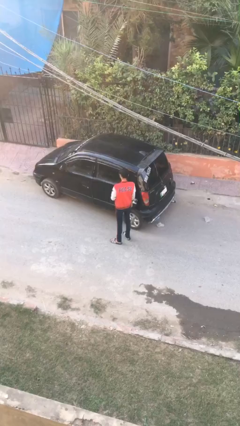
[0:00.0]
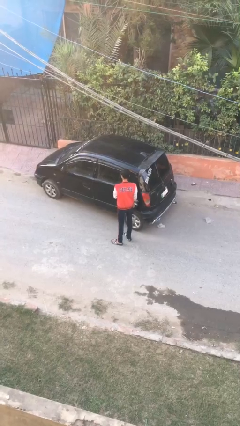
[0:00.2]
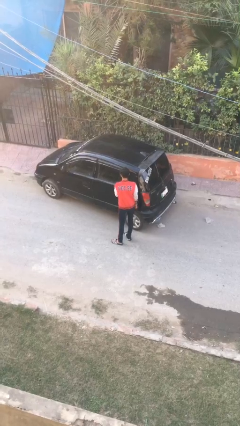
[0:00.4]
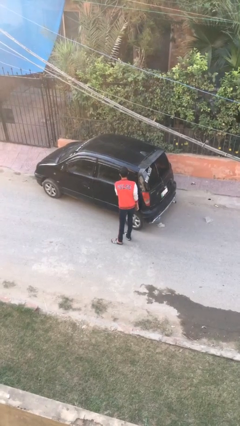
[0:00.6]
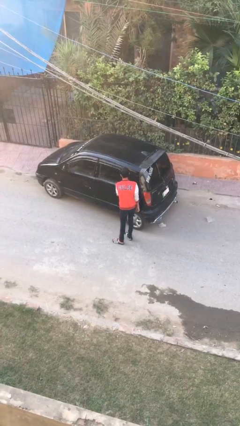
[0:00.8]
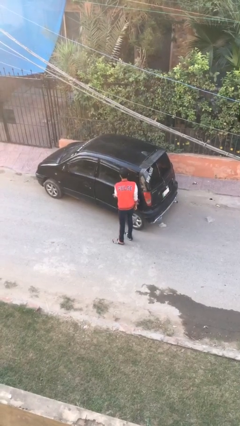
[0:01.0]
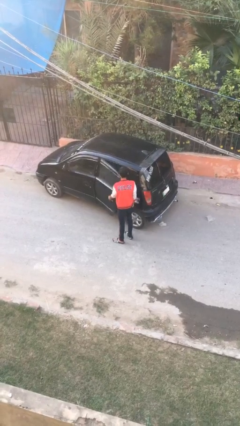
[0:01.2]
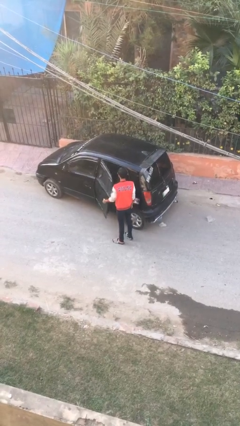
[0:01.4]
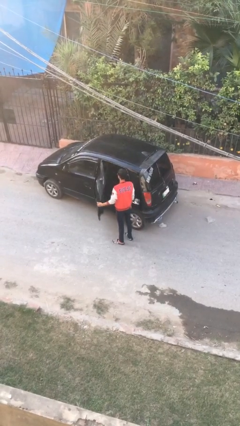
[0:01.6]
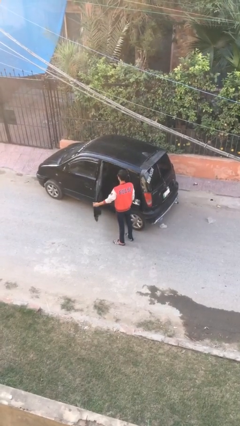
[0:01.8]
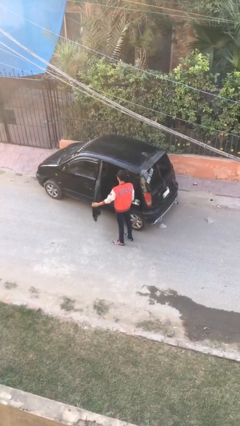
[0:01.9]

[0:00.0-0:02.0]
person opens car door

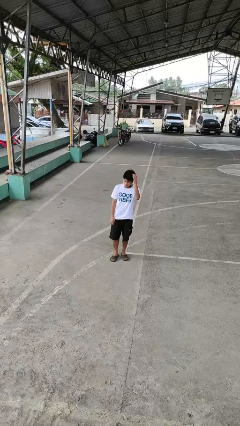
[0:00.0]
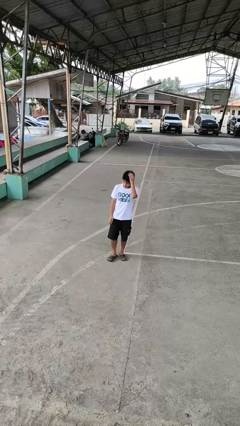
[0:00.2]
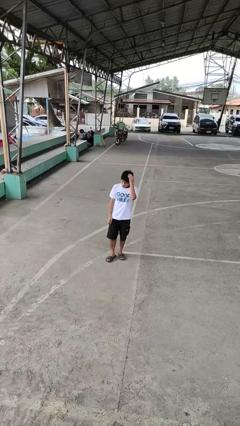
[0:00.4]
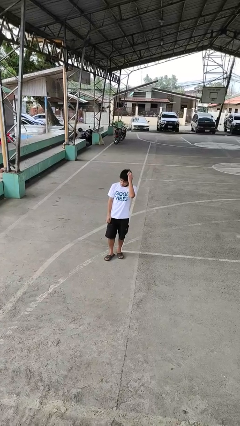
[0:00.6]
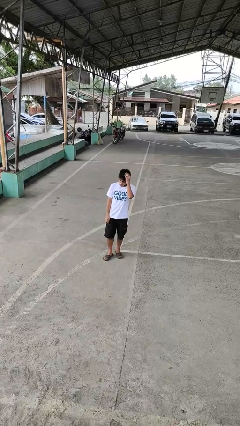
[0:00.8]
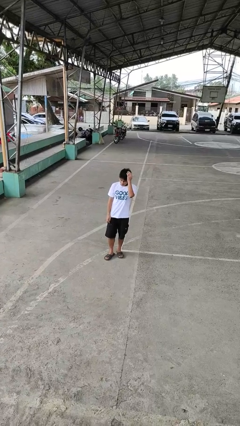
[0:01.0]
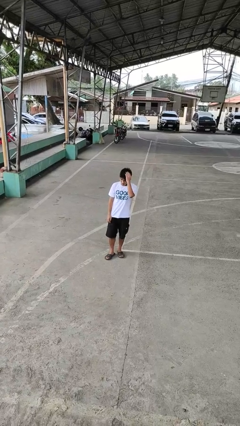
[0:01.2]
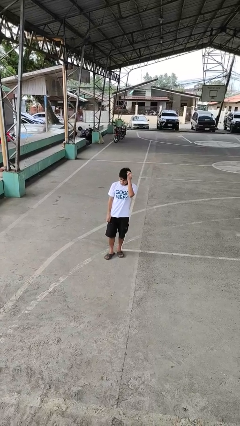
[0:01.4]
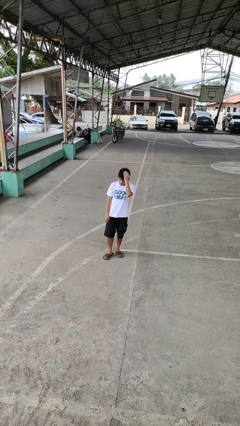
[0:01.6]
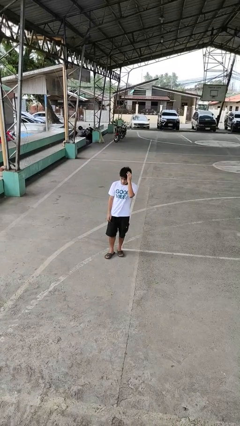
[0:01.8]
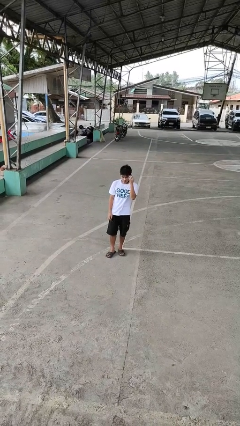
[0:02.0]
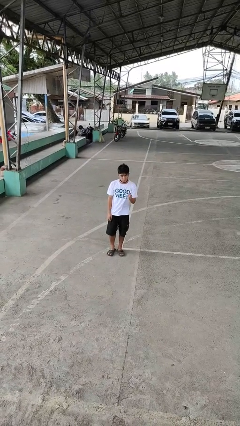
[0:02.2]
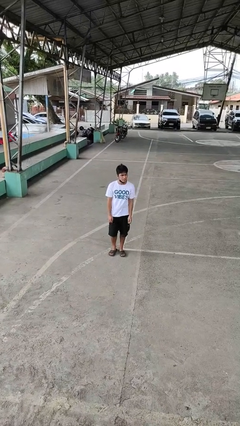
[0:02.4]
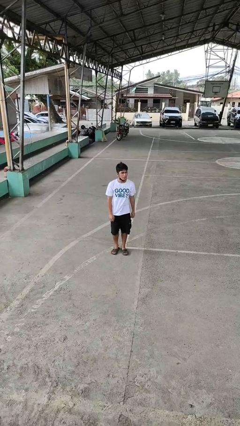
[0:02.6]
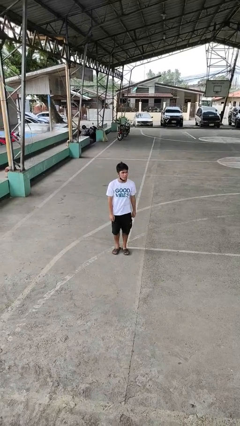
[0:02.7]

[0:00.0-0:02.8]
person pats head

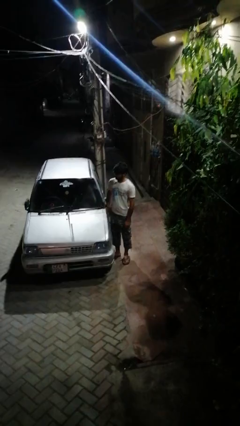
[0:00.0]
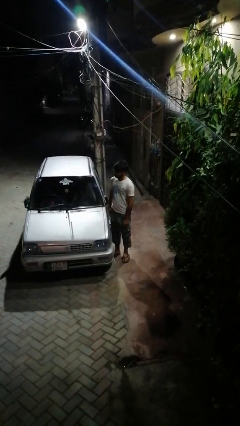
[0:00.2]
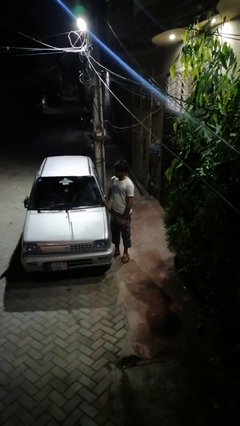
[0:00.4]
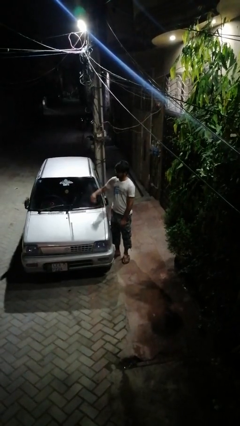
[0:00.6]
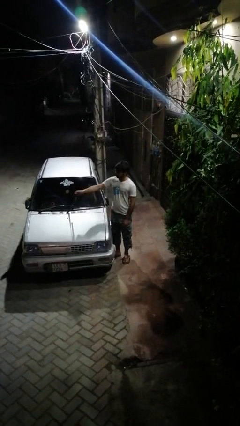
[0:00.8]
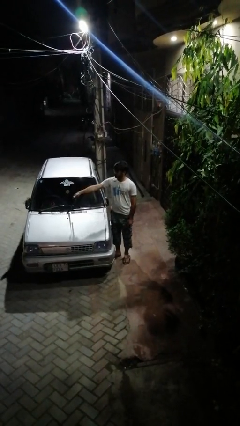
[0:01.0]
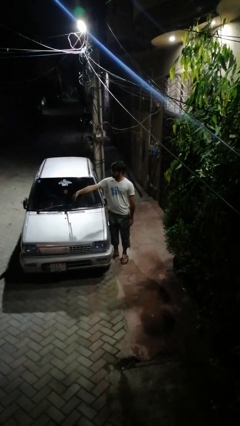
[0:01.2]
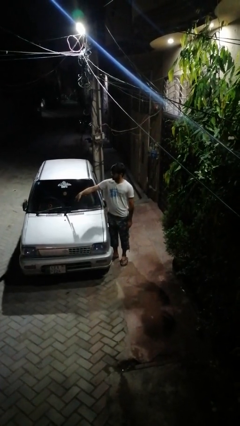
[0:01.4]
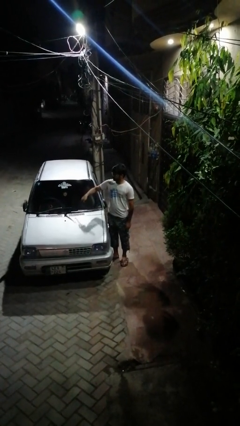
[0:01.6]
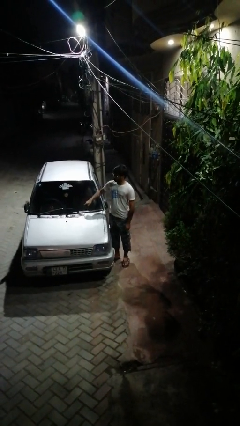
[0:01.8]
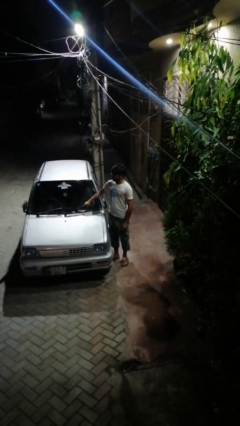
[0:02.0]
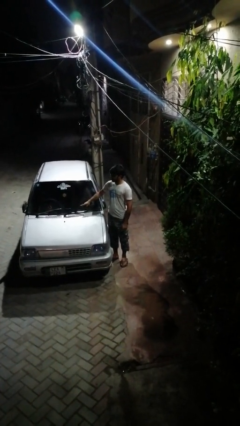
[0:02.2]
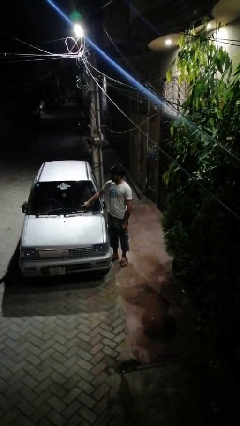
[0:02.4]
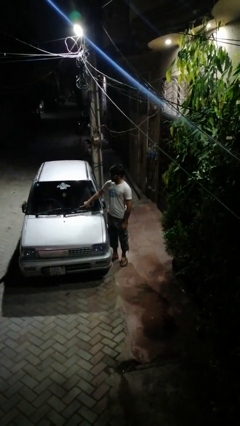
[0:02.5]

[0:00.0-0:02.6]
person flips down car wipers

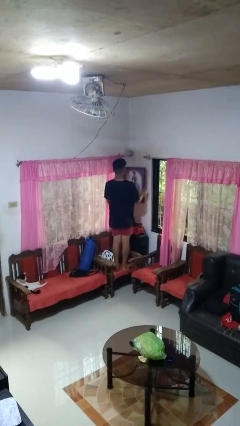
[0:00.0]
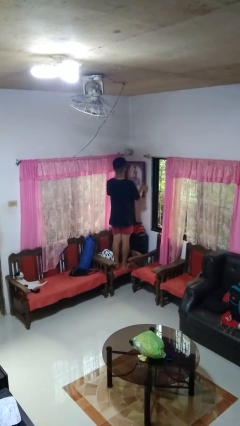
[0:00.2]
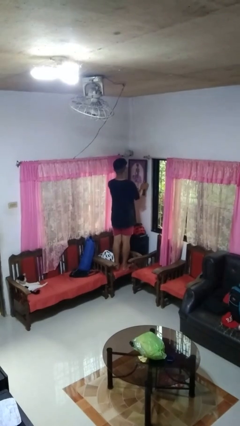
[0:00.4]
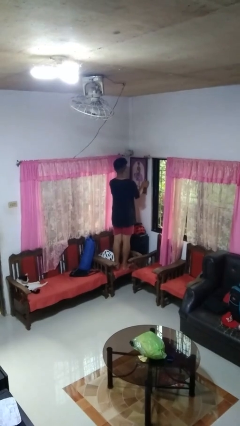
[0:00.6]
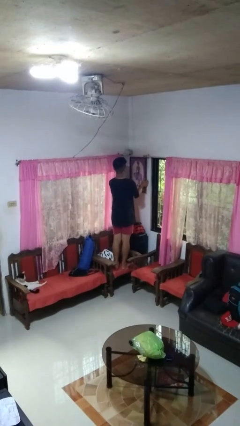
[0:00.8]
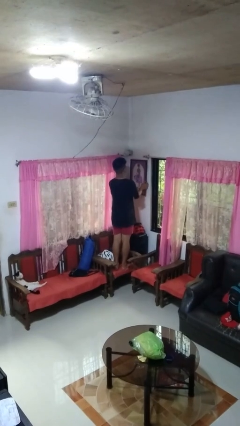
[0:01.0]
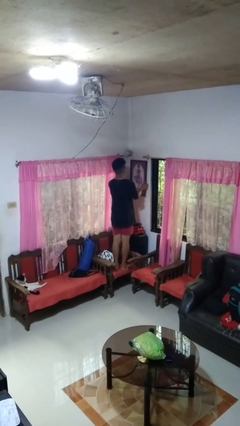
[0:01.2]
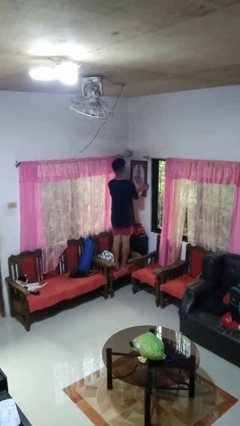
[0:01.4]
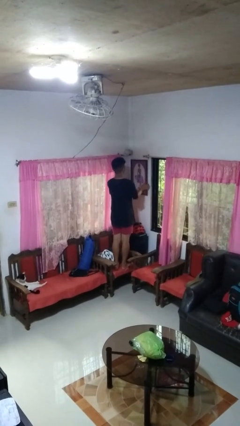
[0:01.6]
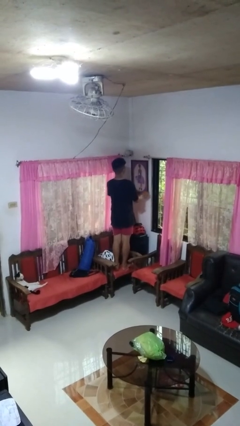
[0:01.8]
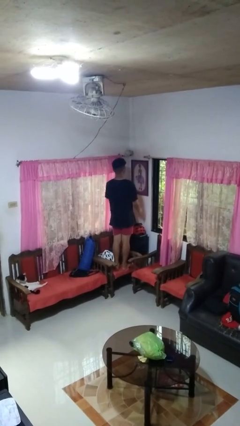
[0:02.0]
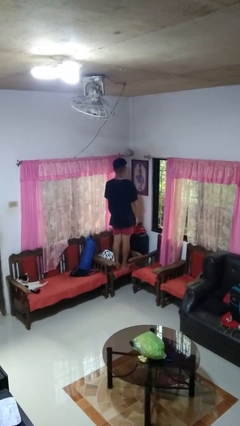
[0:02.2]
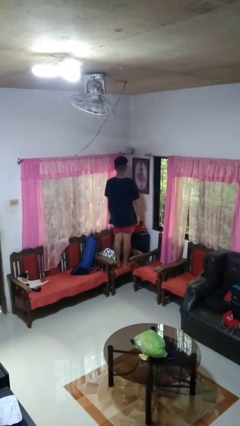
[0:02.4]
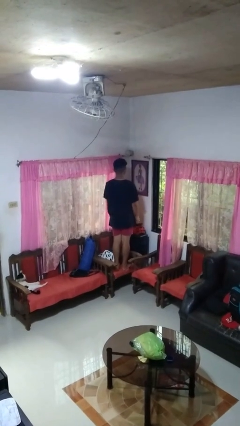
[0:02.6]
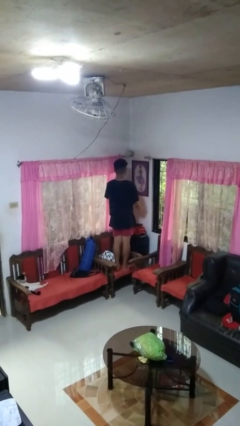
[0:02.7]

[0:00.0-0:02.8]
person puts up picture frame

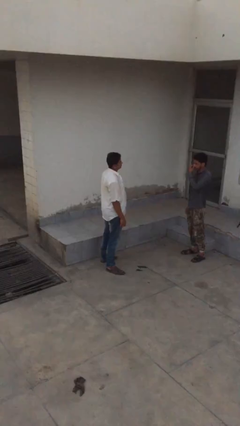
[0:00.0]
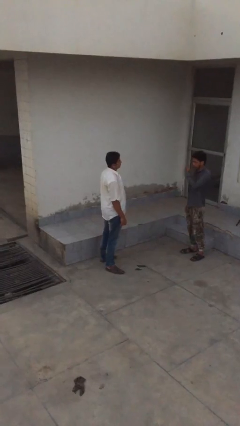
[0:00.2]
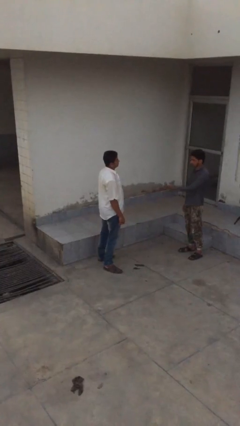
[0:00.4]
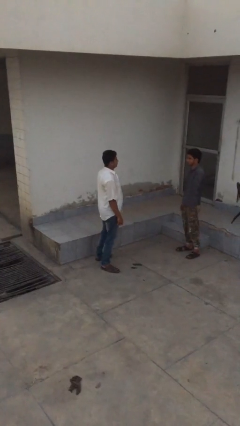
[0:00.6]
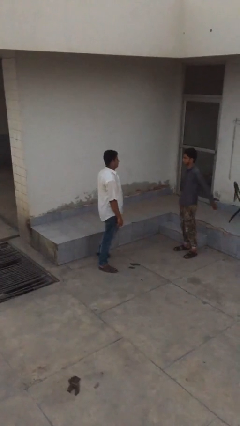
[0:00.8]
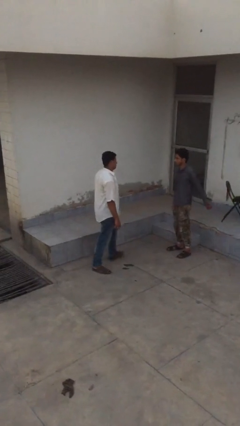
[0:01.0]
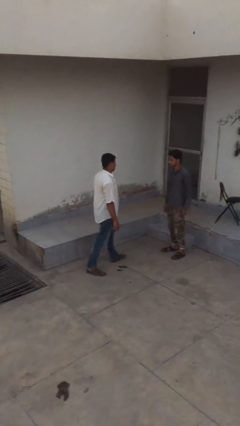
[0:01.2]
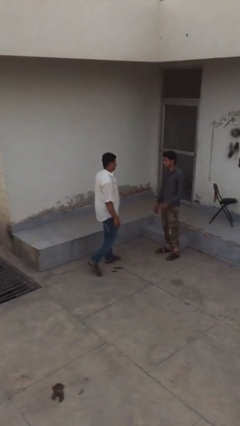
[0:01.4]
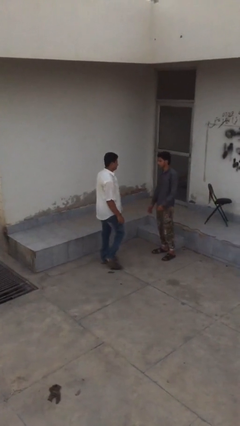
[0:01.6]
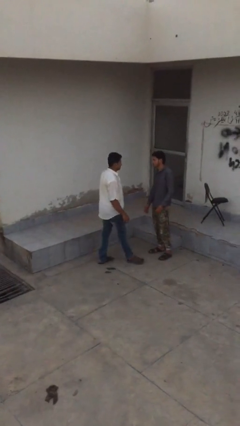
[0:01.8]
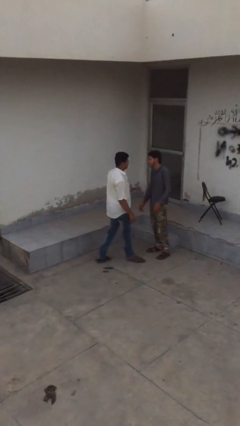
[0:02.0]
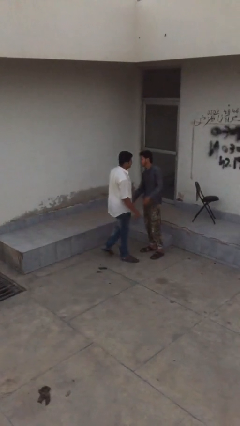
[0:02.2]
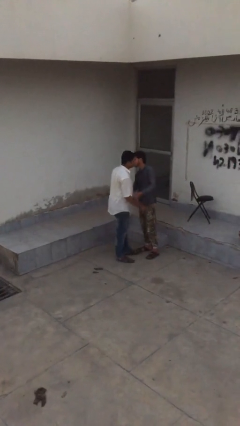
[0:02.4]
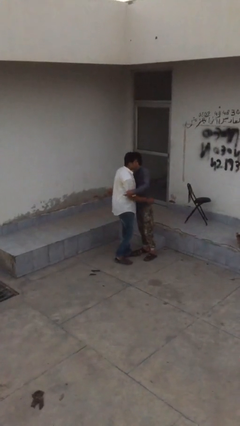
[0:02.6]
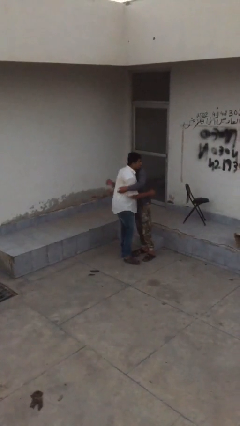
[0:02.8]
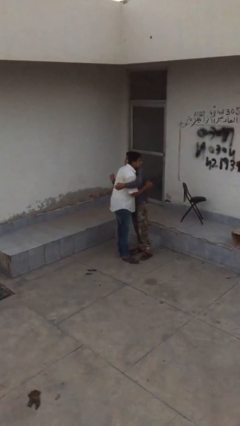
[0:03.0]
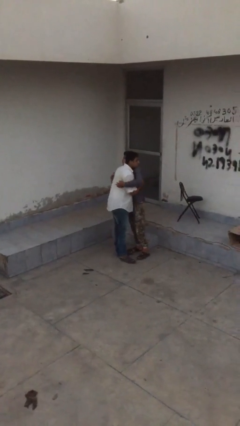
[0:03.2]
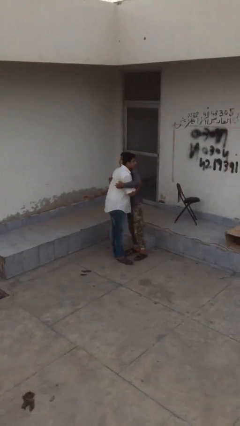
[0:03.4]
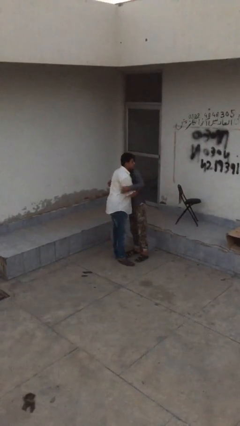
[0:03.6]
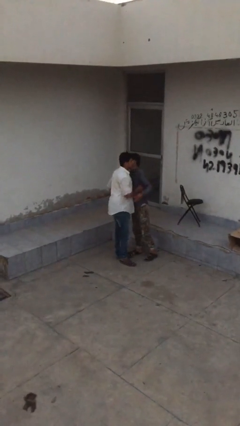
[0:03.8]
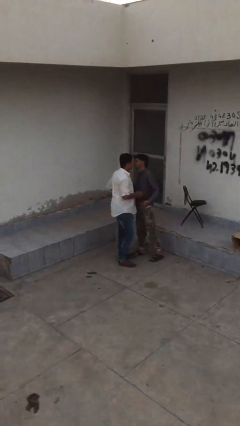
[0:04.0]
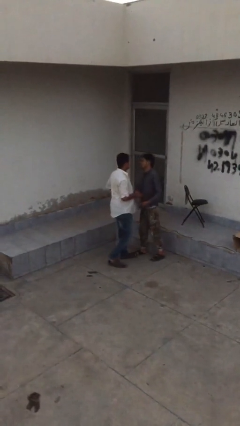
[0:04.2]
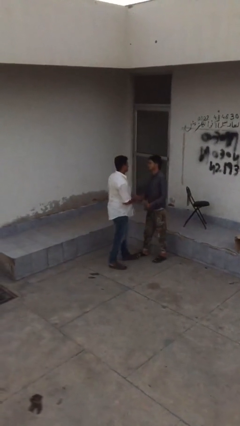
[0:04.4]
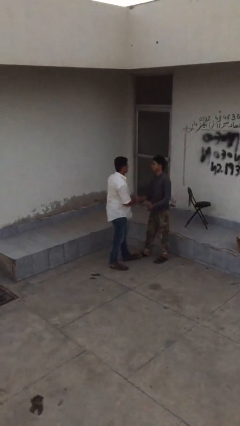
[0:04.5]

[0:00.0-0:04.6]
person embraces person

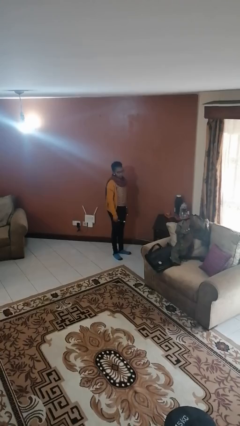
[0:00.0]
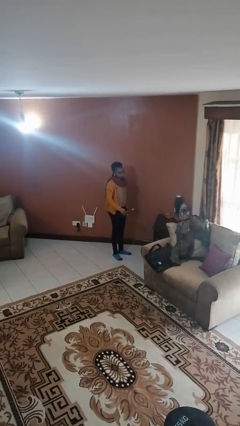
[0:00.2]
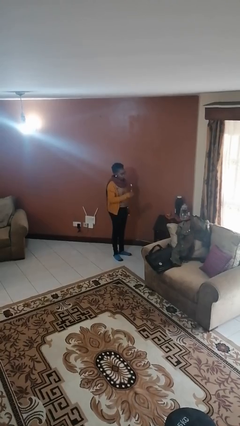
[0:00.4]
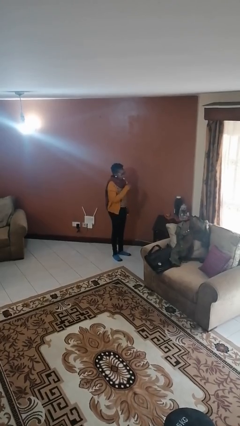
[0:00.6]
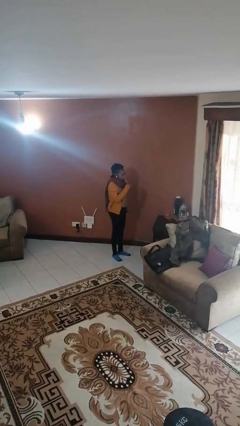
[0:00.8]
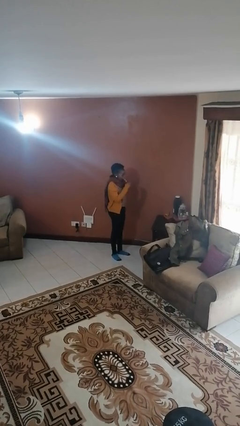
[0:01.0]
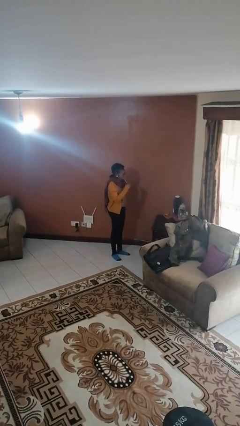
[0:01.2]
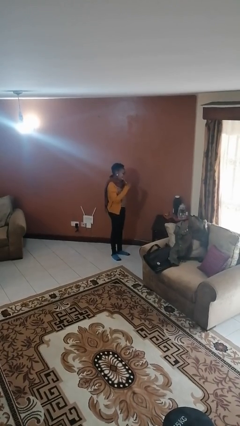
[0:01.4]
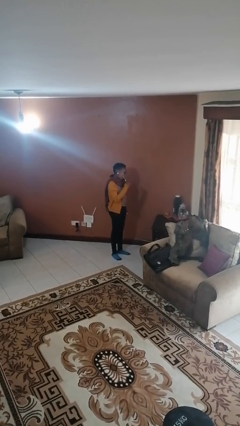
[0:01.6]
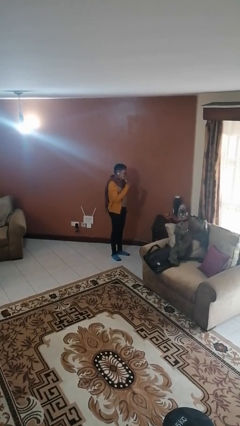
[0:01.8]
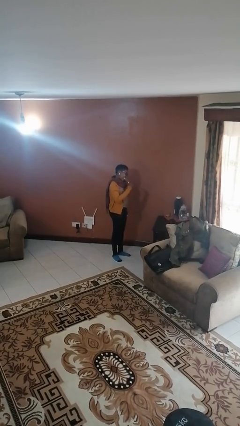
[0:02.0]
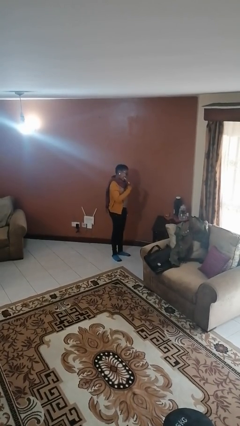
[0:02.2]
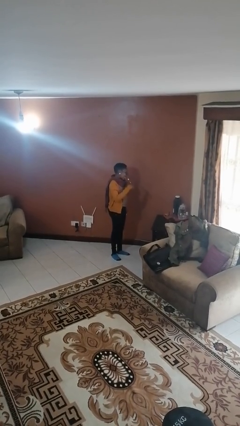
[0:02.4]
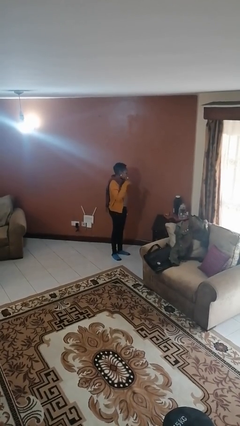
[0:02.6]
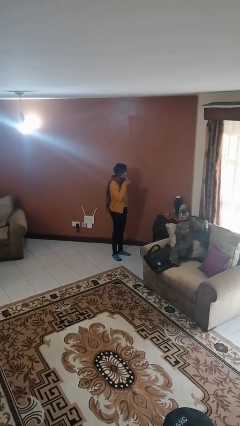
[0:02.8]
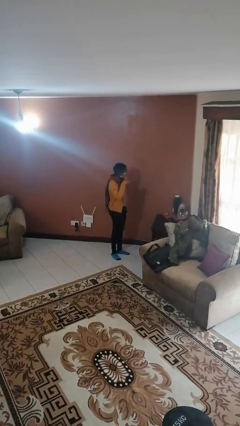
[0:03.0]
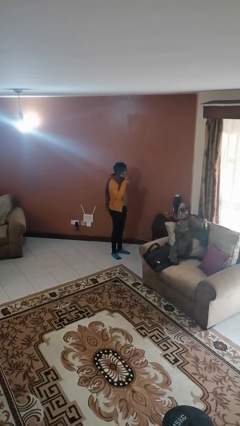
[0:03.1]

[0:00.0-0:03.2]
person brushes teeth
